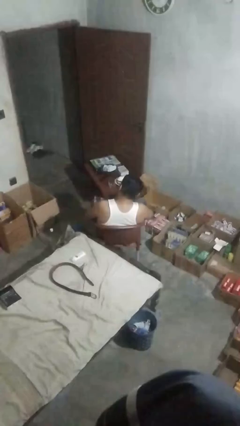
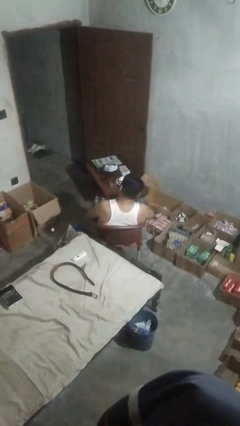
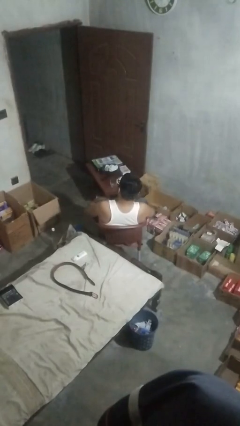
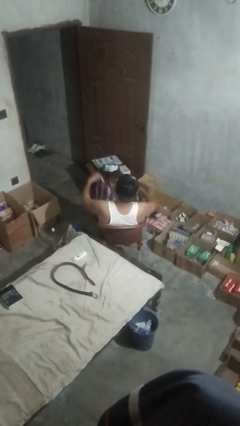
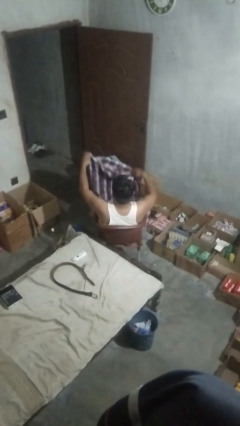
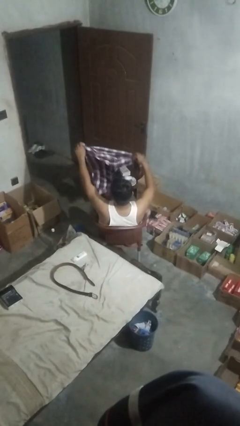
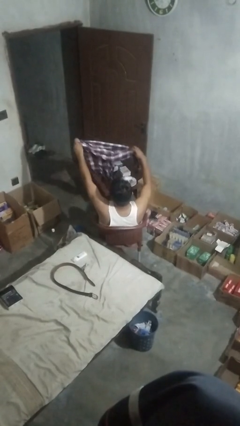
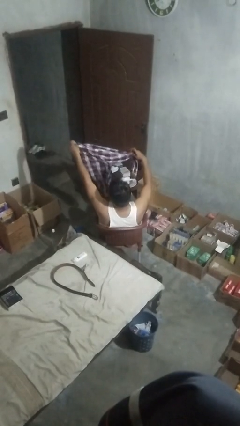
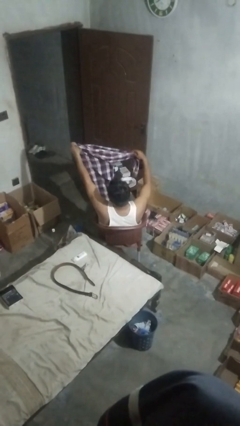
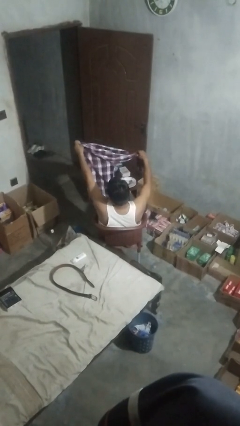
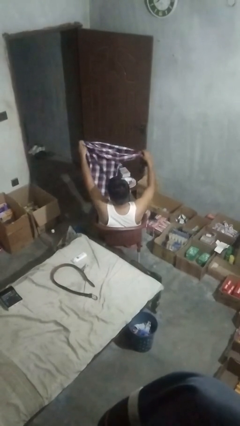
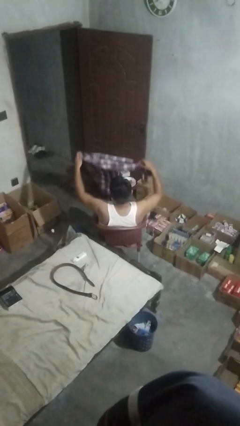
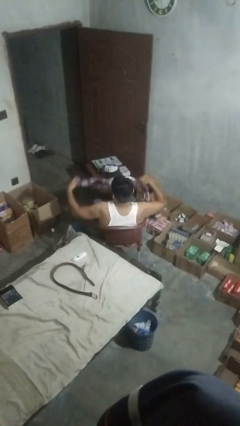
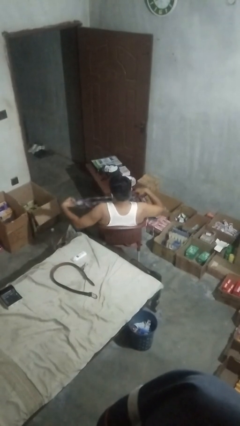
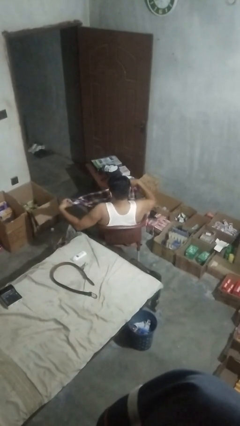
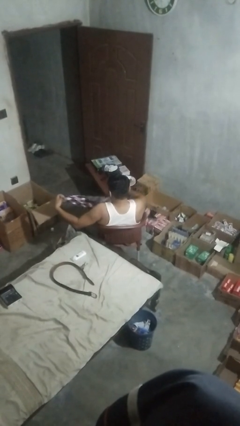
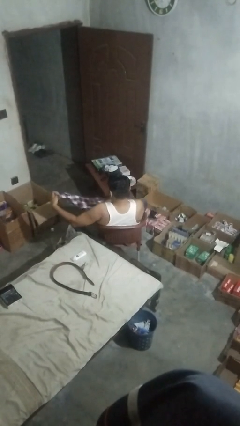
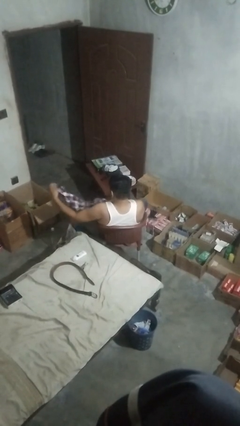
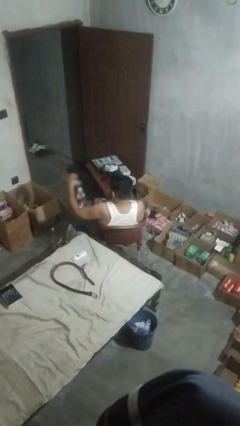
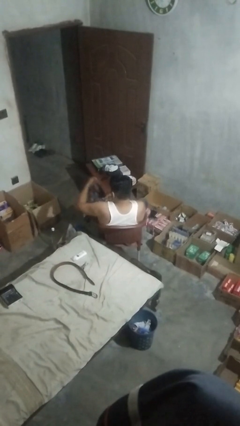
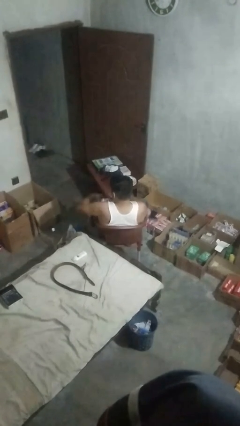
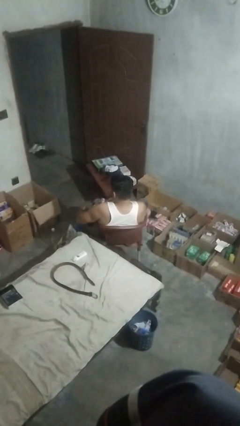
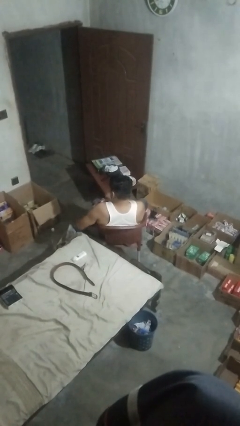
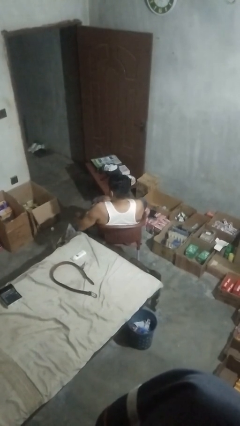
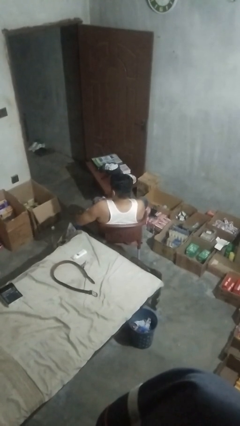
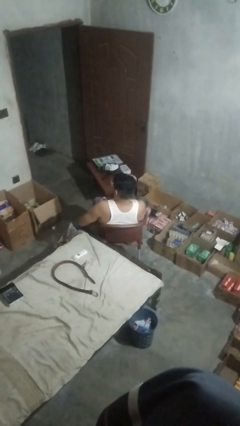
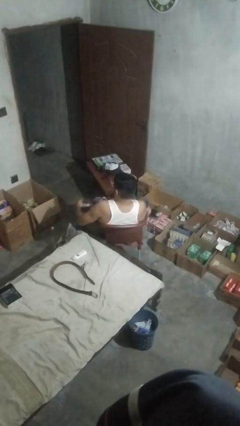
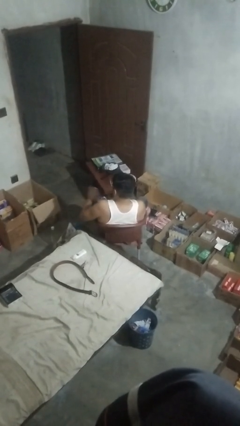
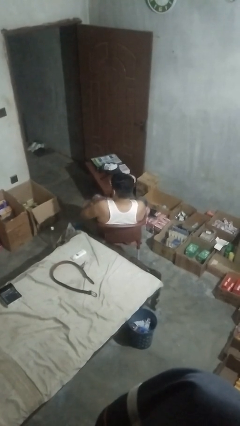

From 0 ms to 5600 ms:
person folds shirt

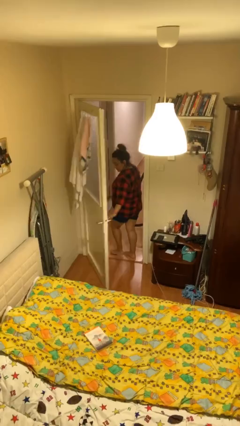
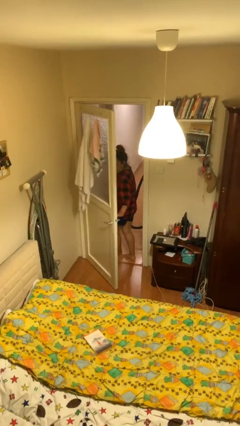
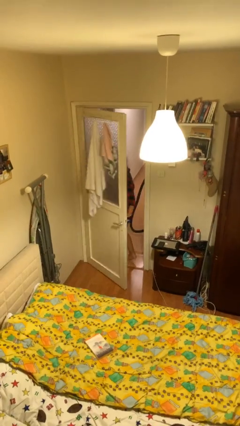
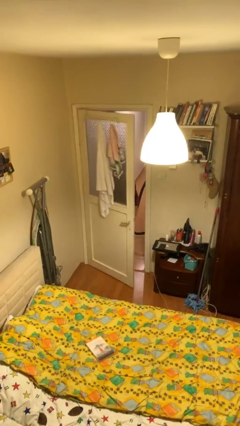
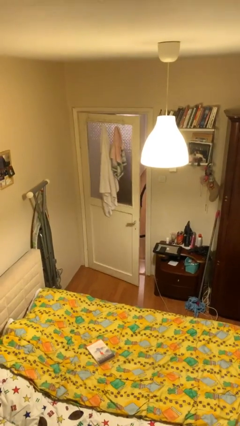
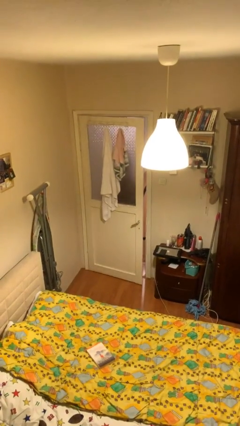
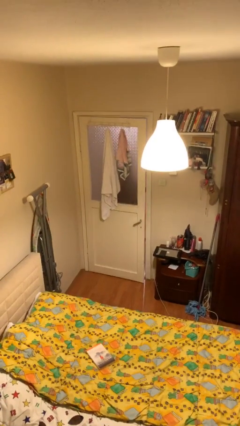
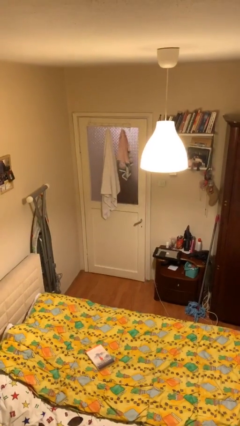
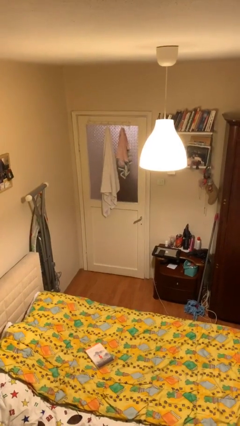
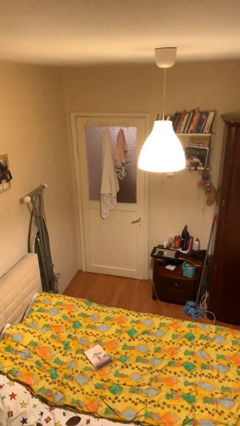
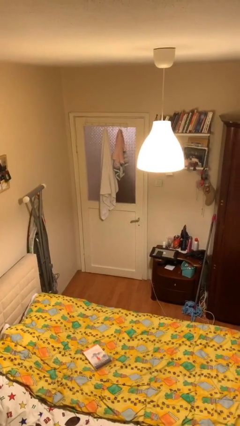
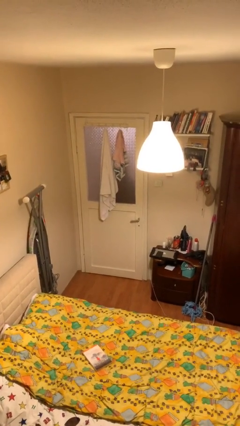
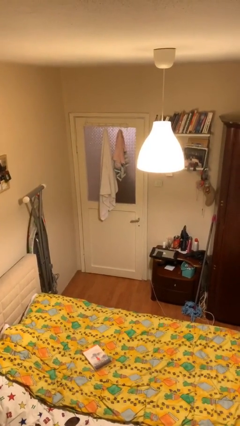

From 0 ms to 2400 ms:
person closes facility door

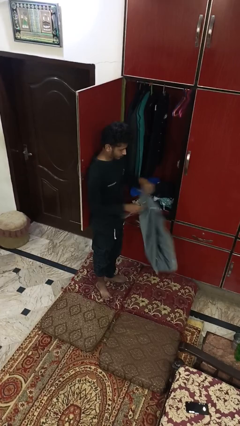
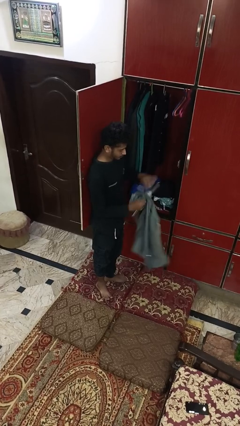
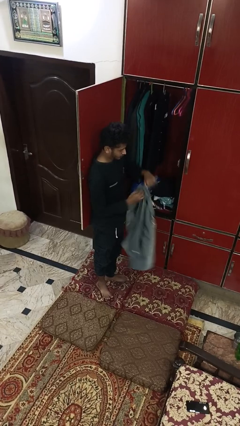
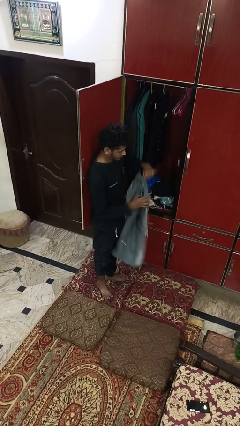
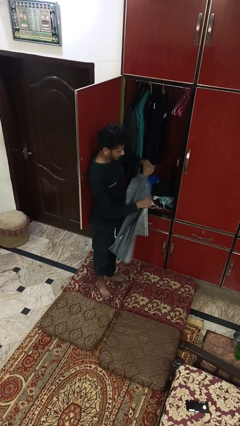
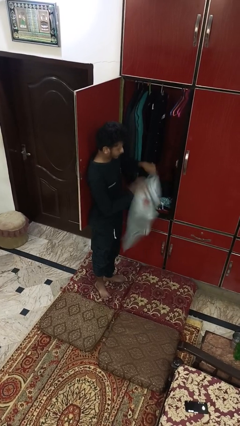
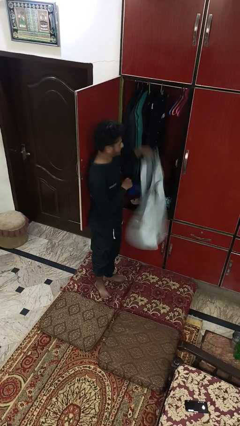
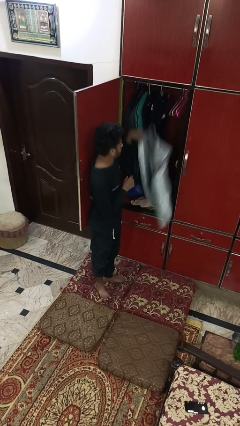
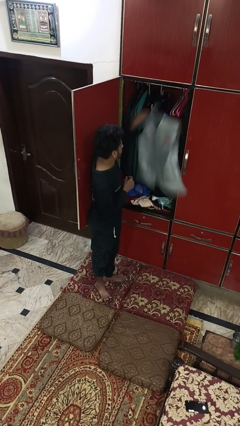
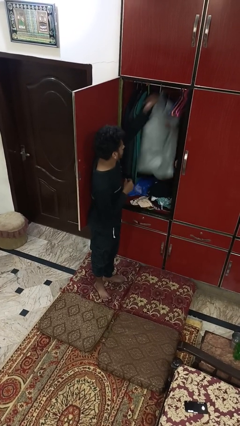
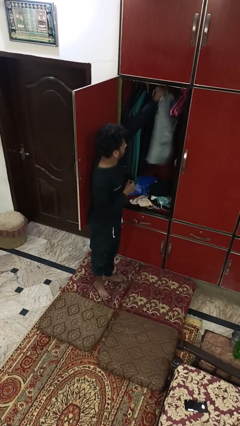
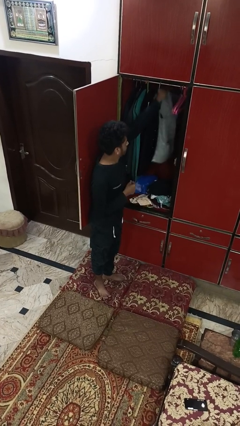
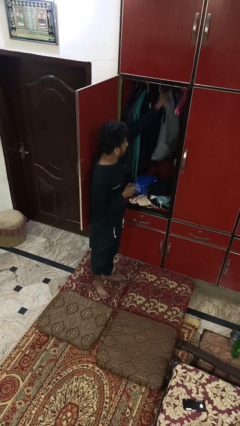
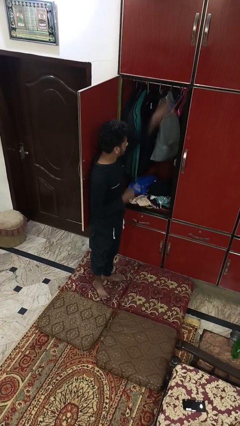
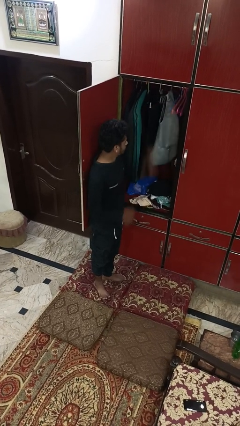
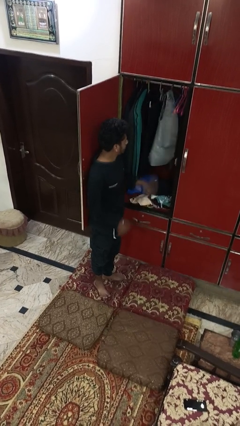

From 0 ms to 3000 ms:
person puts clothes into closet

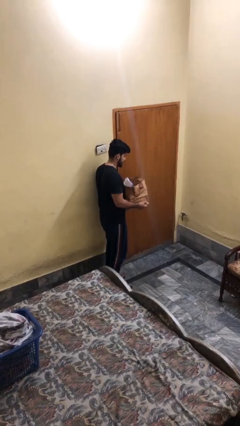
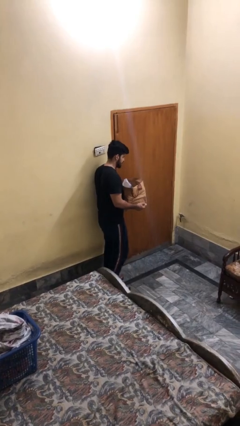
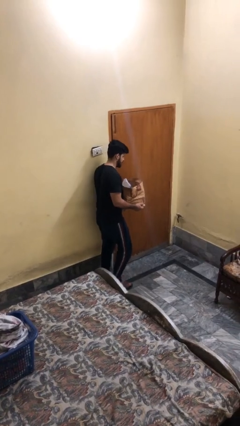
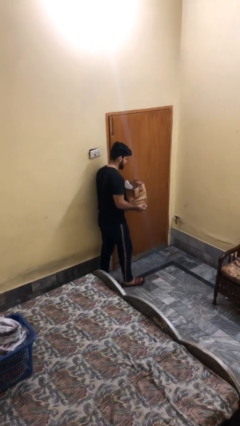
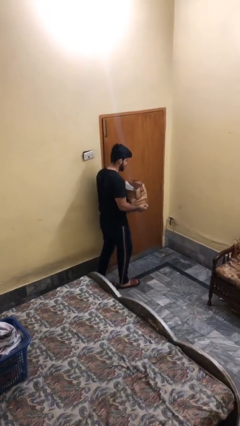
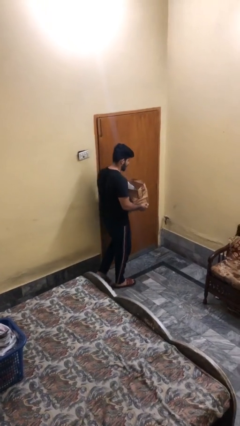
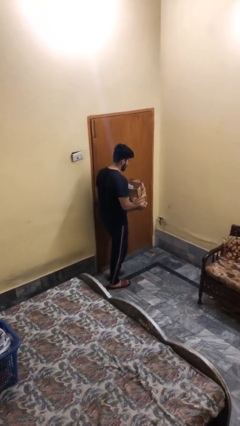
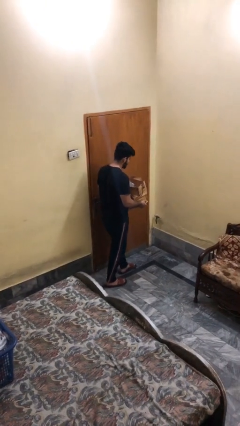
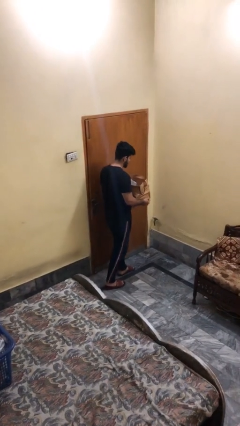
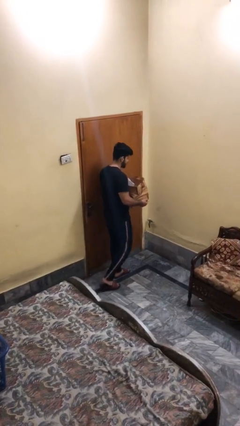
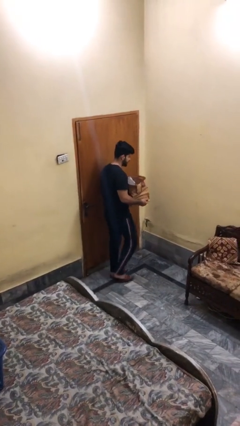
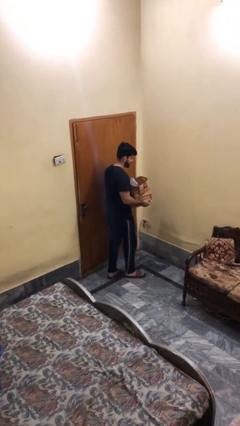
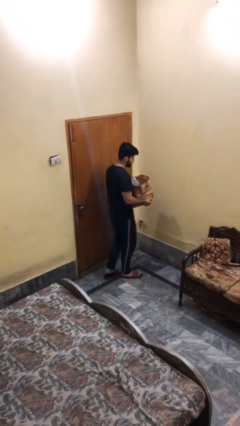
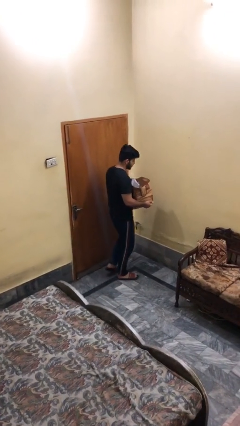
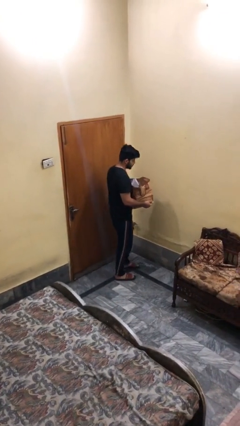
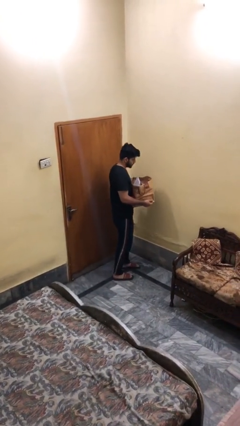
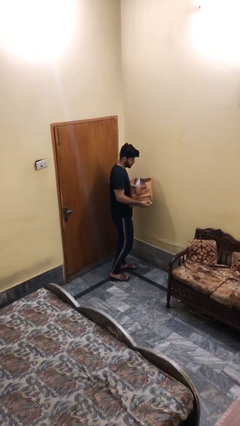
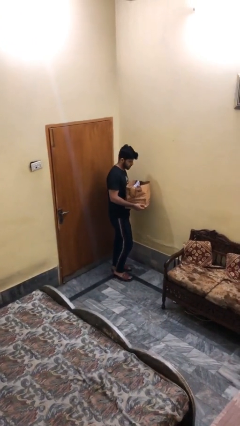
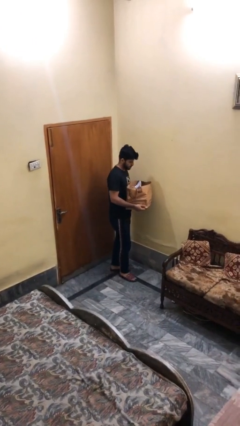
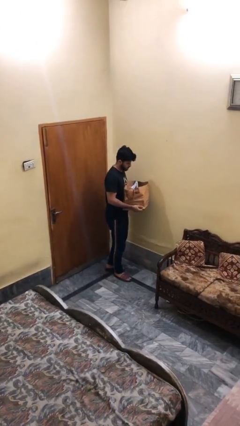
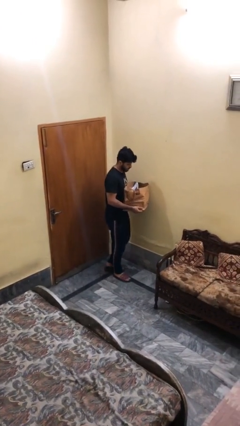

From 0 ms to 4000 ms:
person carries groceries

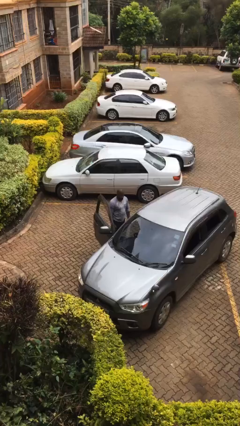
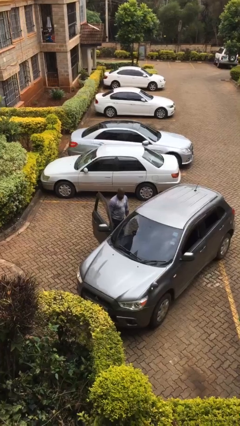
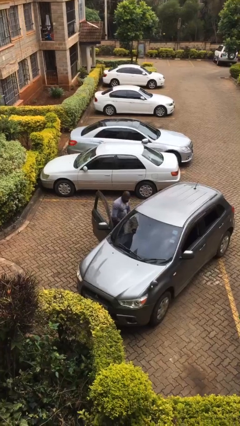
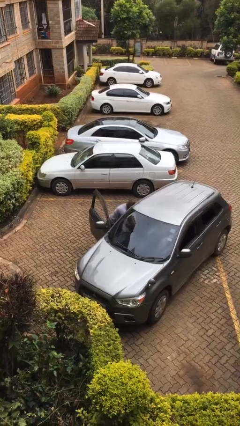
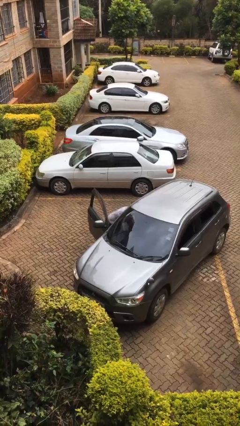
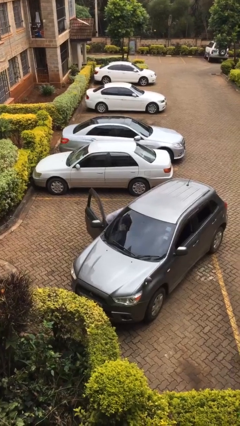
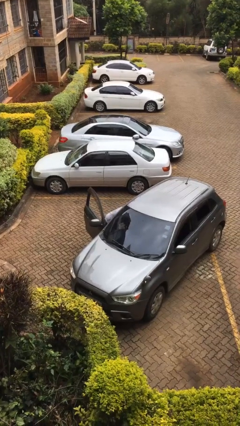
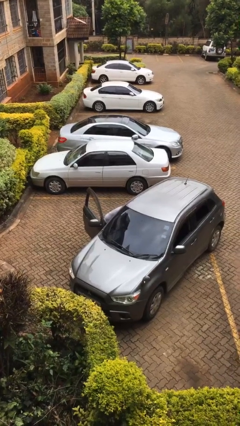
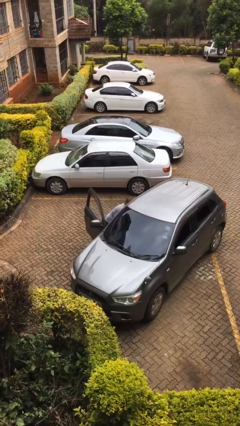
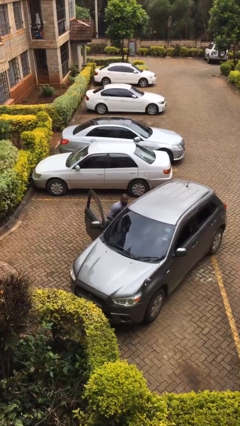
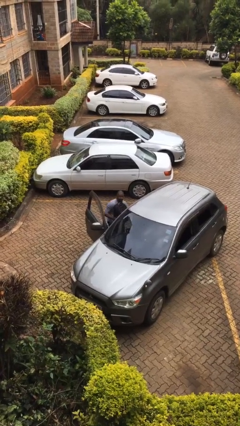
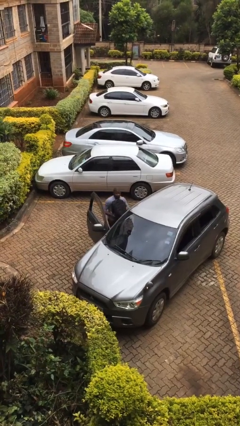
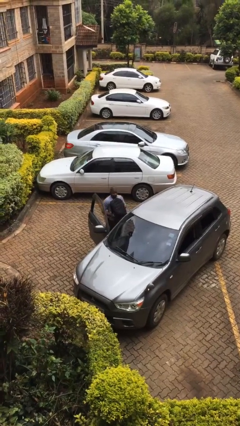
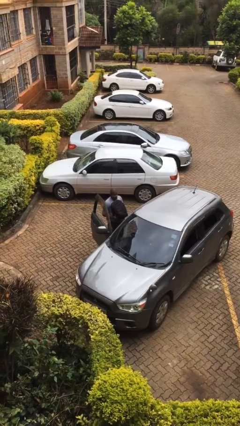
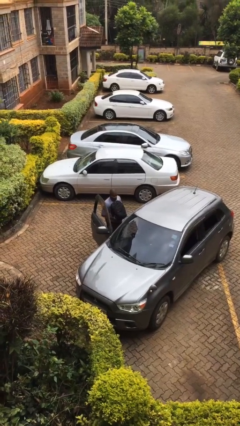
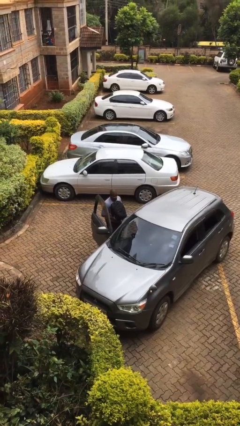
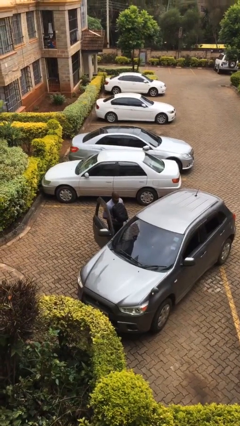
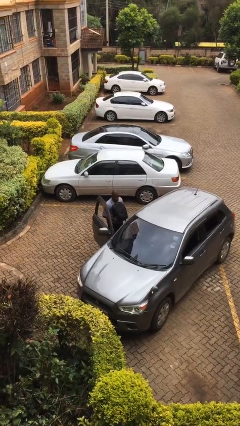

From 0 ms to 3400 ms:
person unloads car
